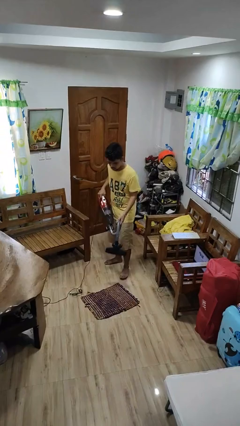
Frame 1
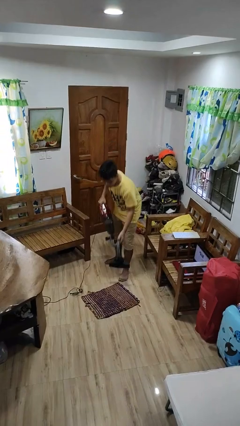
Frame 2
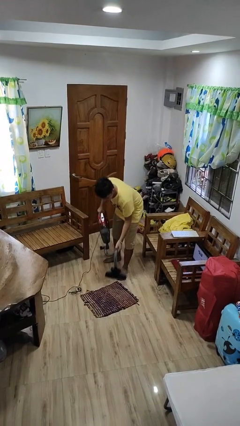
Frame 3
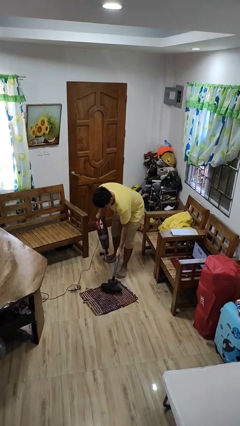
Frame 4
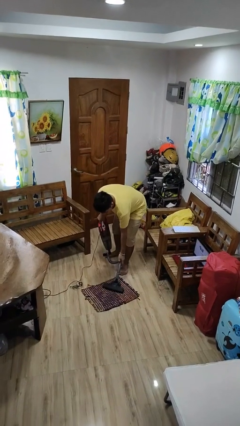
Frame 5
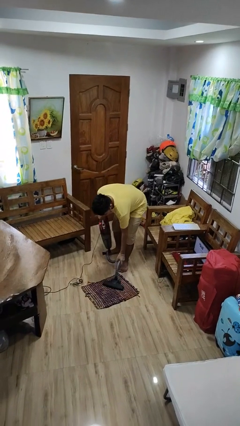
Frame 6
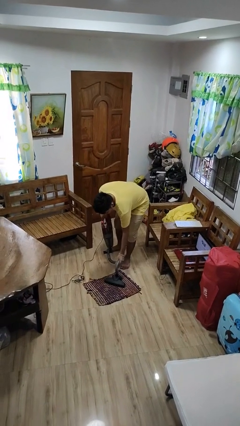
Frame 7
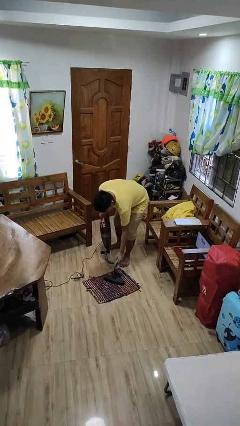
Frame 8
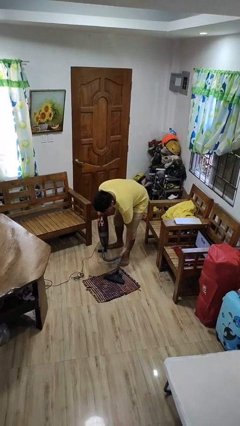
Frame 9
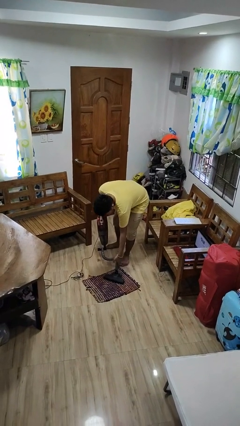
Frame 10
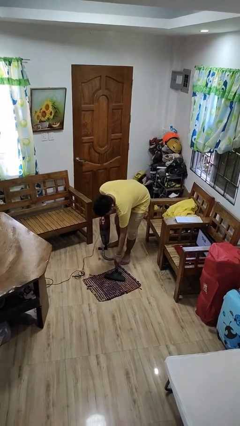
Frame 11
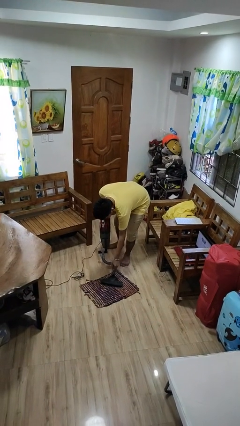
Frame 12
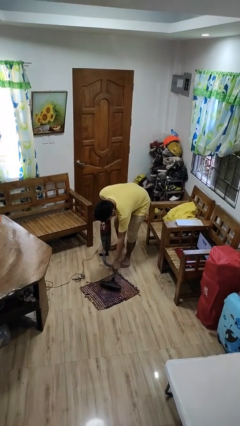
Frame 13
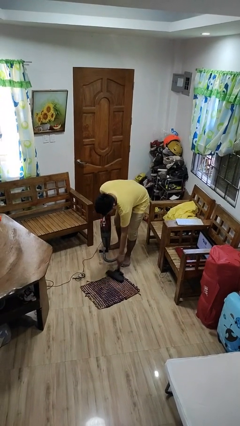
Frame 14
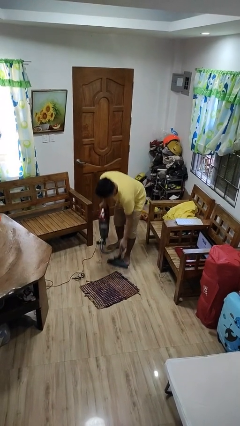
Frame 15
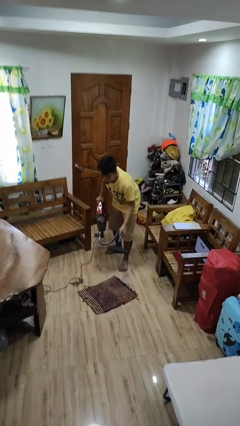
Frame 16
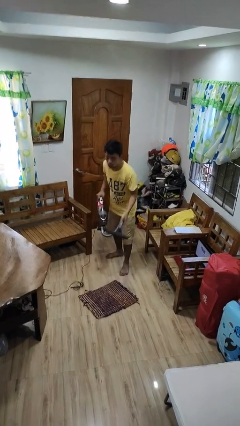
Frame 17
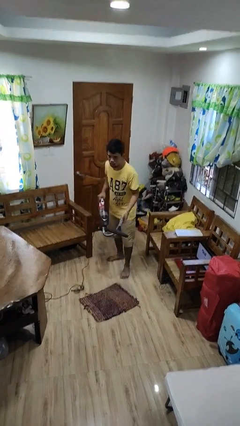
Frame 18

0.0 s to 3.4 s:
person vacuums carpet

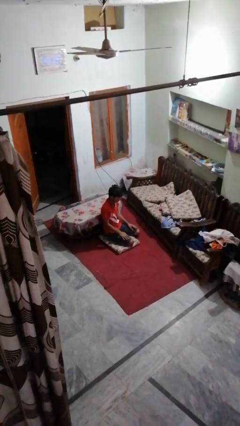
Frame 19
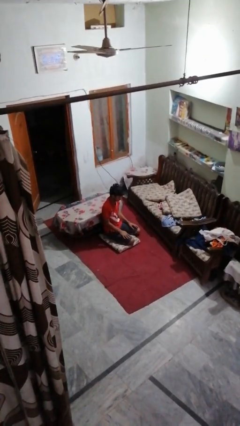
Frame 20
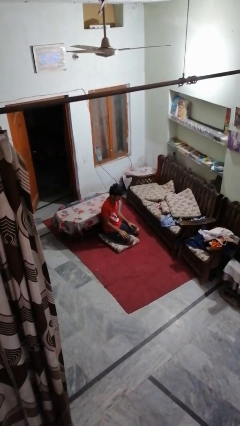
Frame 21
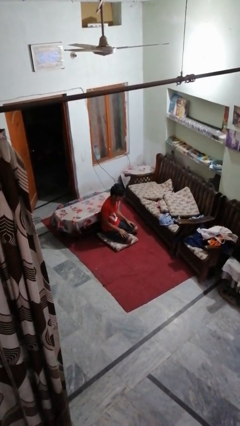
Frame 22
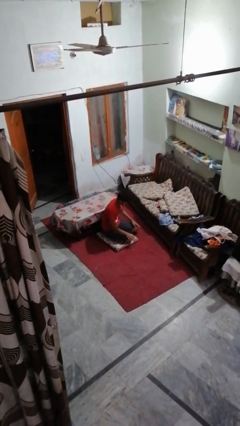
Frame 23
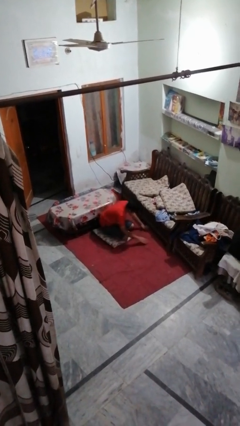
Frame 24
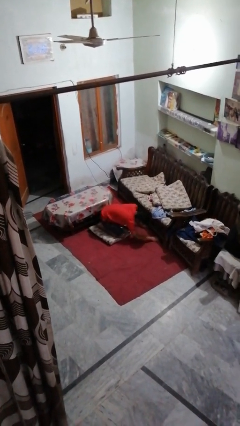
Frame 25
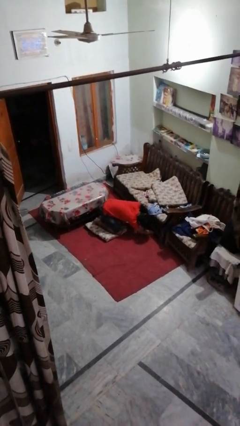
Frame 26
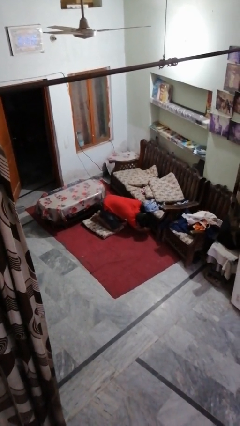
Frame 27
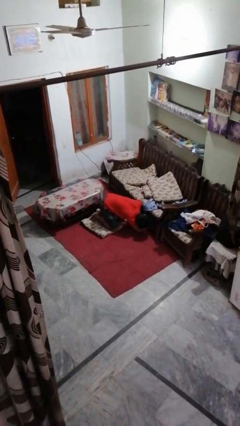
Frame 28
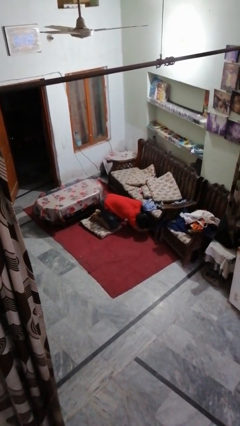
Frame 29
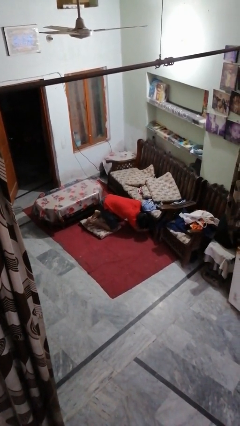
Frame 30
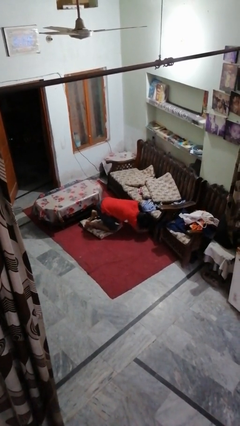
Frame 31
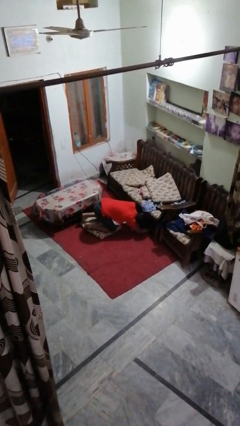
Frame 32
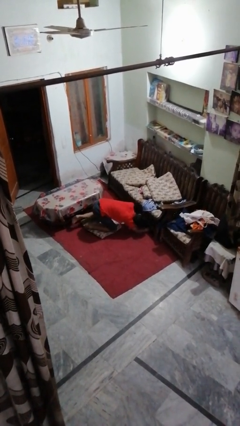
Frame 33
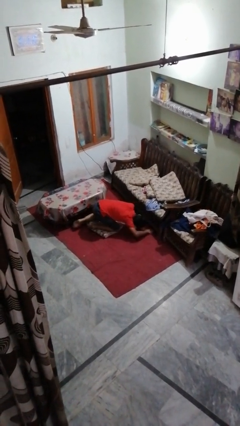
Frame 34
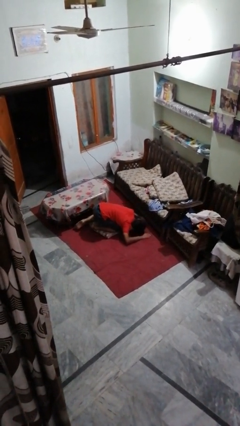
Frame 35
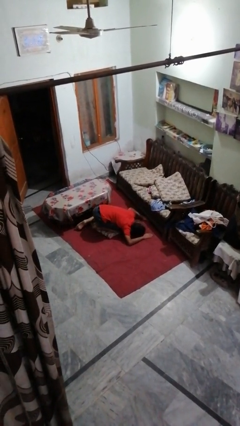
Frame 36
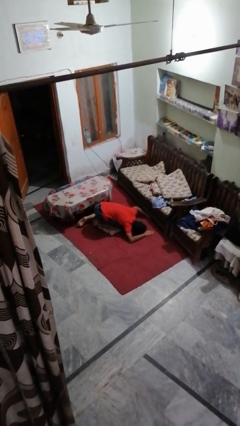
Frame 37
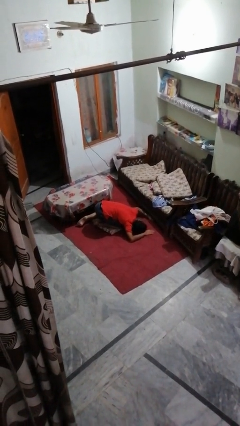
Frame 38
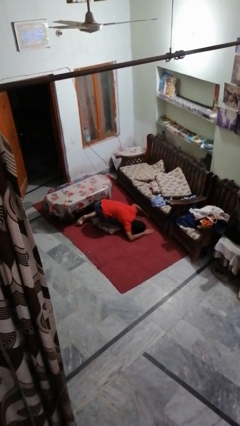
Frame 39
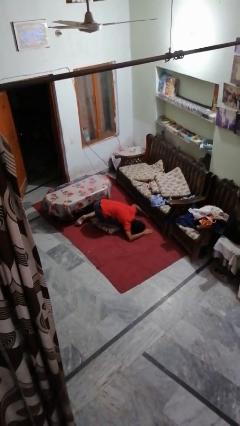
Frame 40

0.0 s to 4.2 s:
person searches under couch

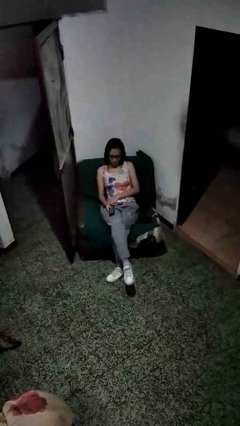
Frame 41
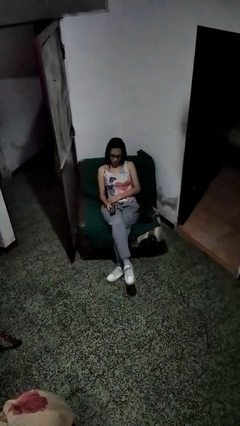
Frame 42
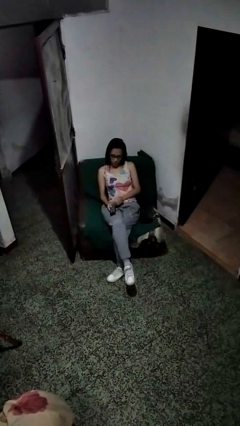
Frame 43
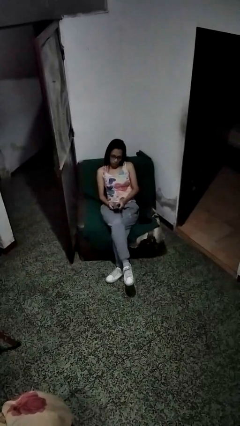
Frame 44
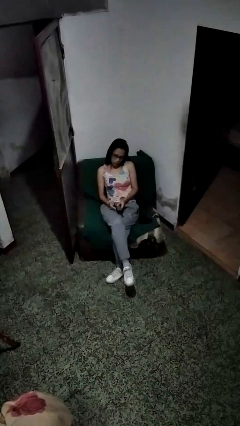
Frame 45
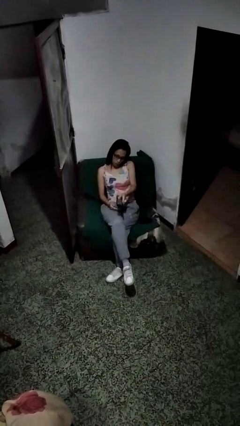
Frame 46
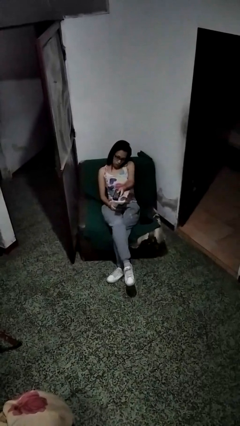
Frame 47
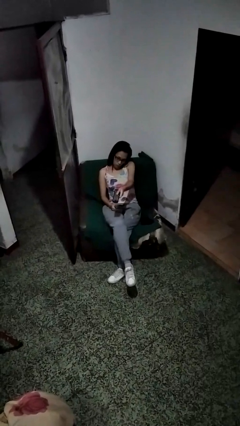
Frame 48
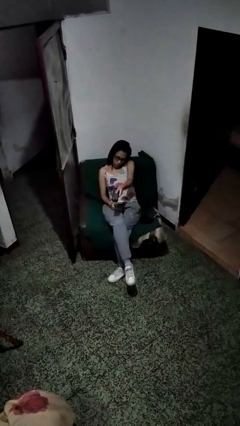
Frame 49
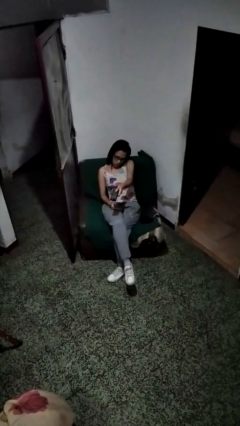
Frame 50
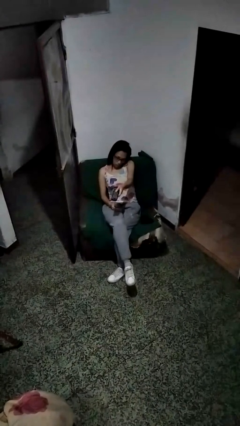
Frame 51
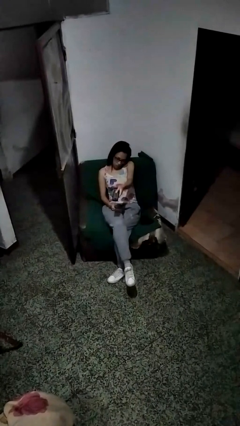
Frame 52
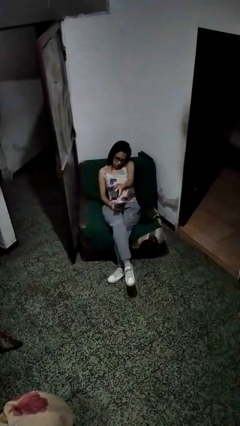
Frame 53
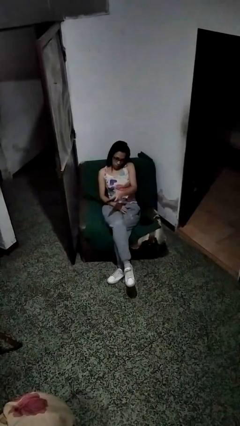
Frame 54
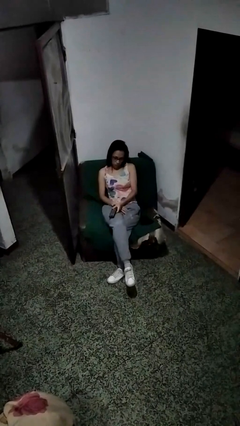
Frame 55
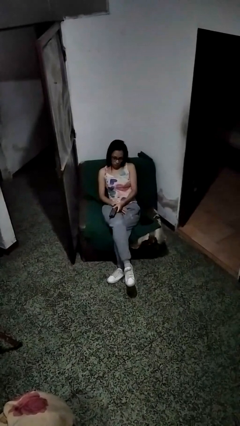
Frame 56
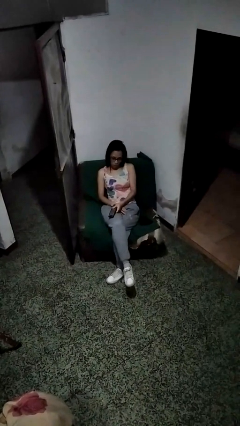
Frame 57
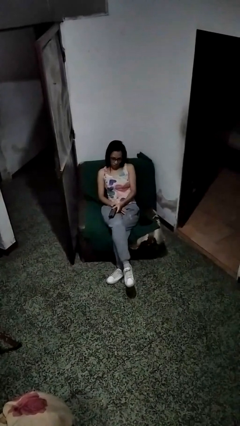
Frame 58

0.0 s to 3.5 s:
person uses television remote

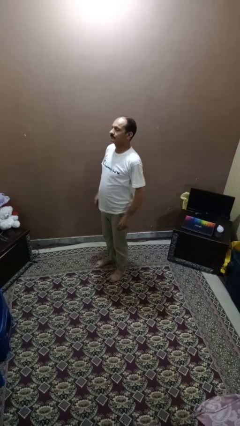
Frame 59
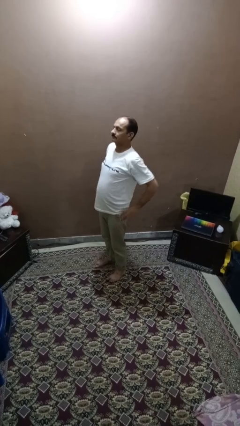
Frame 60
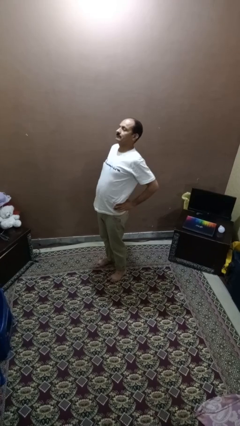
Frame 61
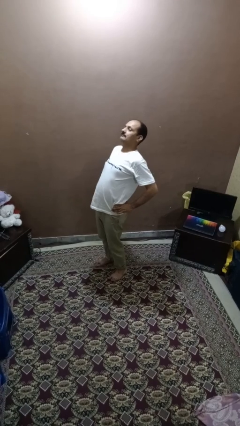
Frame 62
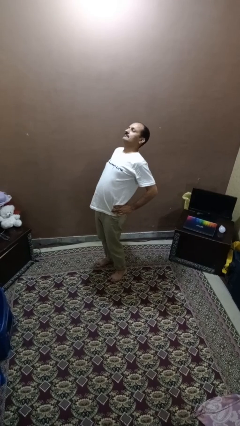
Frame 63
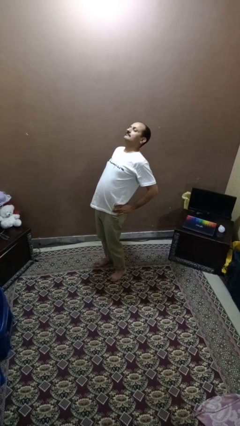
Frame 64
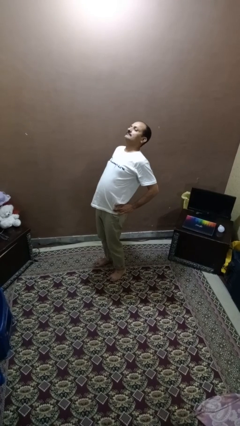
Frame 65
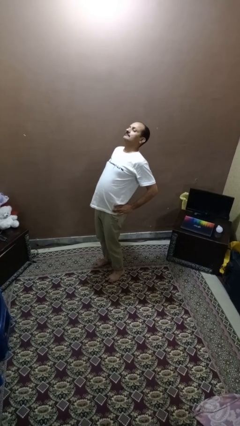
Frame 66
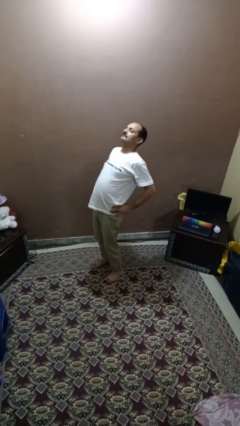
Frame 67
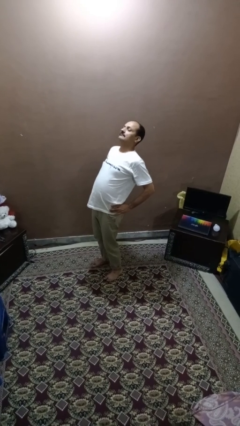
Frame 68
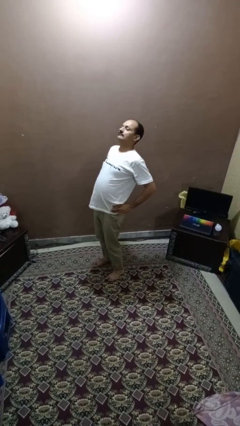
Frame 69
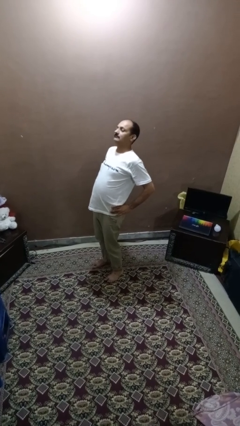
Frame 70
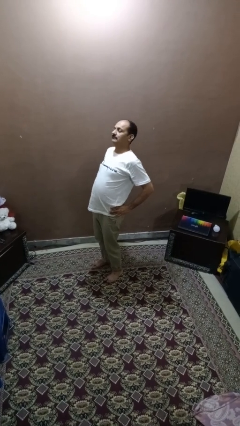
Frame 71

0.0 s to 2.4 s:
person stretches back

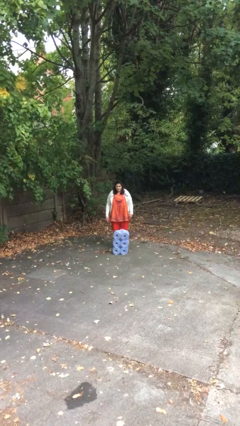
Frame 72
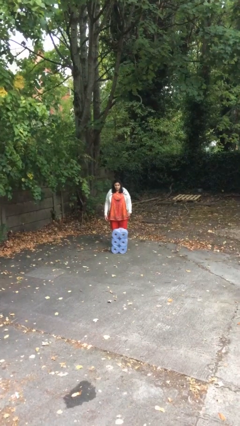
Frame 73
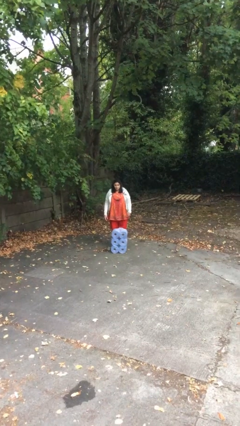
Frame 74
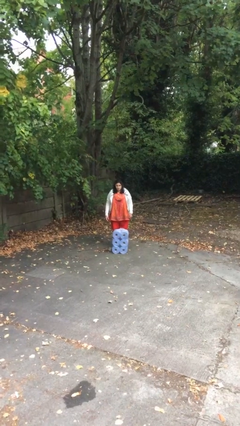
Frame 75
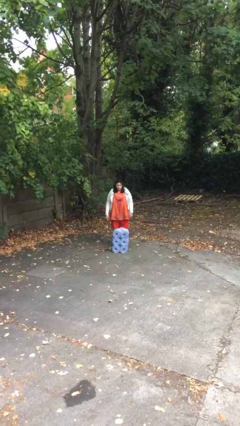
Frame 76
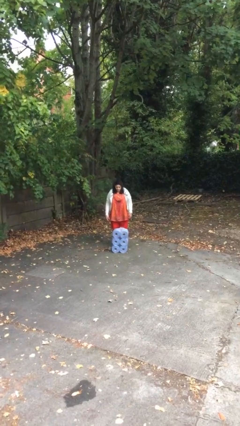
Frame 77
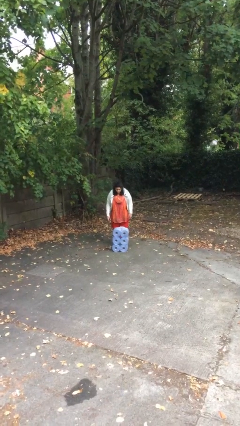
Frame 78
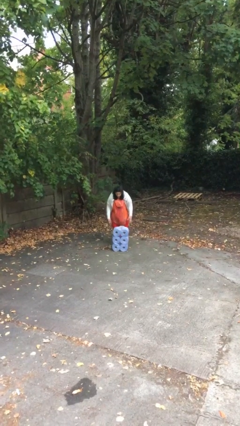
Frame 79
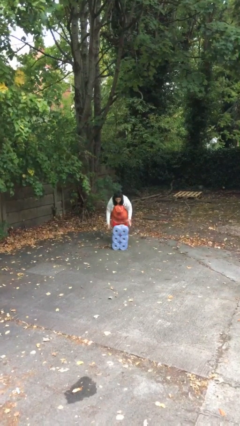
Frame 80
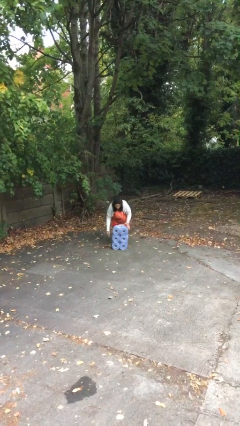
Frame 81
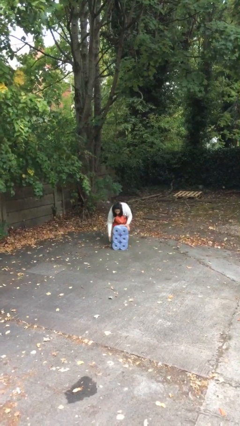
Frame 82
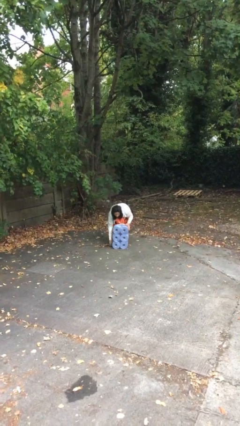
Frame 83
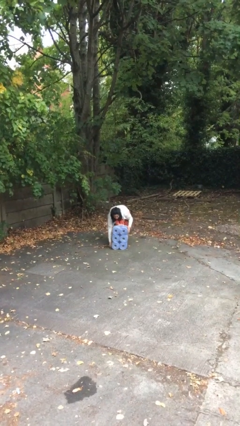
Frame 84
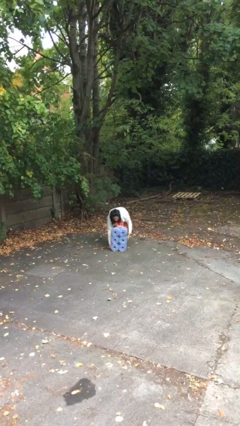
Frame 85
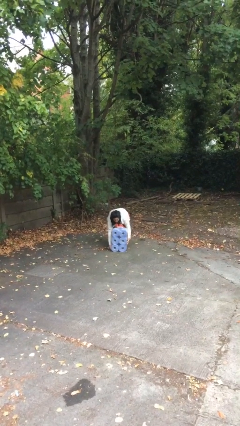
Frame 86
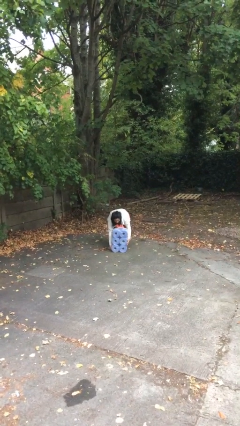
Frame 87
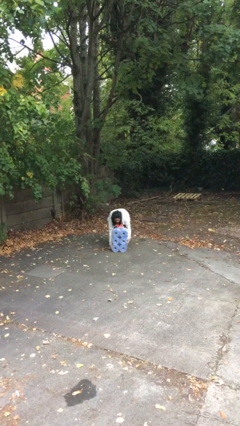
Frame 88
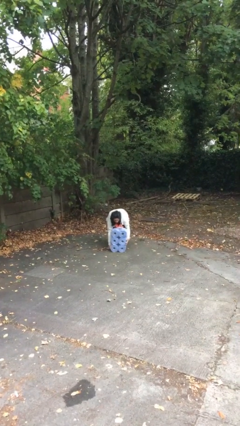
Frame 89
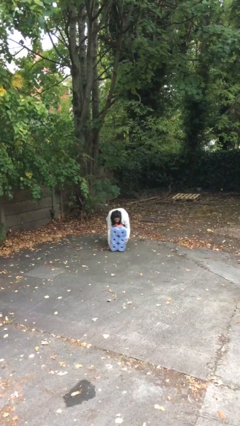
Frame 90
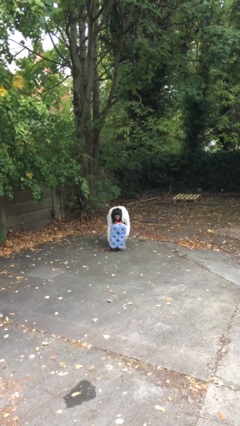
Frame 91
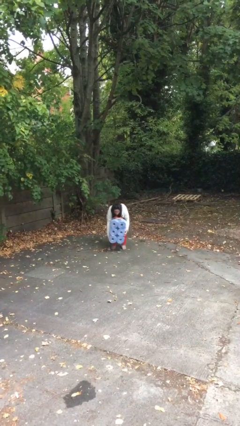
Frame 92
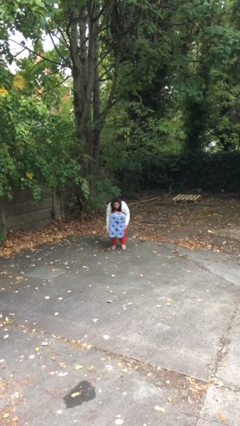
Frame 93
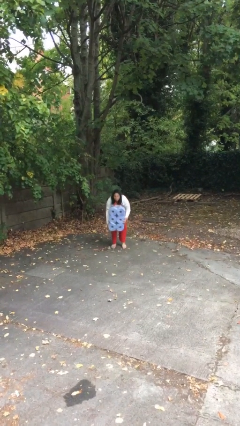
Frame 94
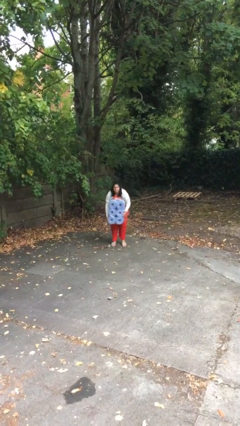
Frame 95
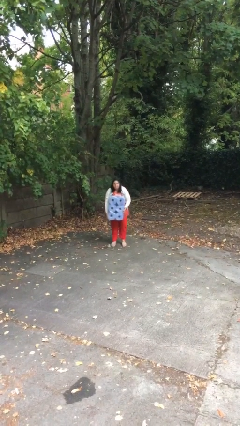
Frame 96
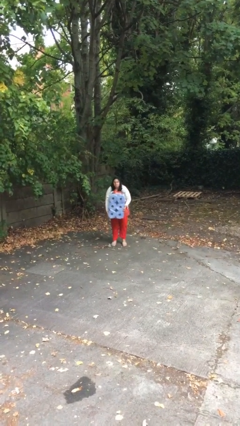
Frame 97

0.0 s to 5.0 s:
person picks up object from floor
